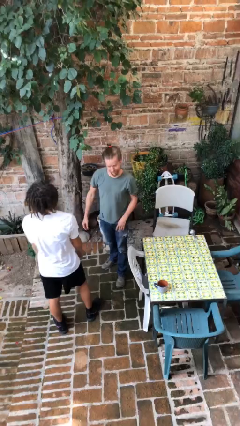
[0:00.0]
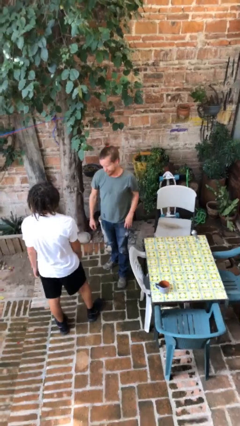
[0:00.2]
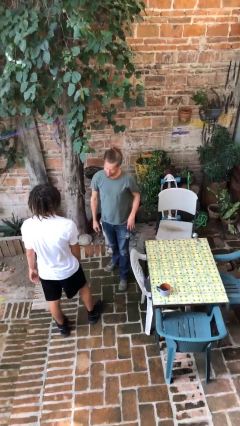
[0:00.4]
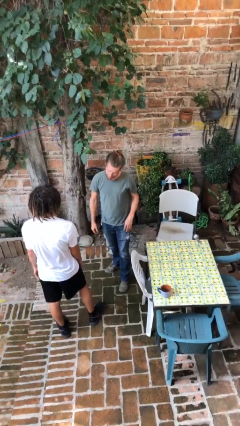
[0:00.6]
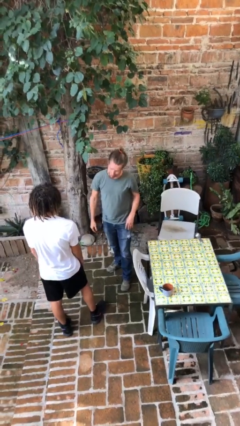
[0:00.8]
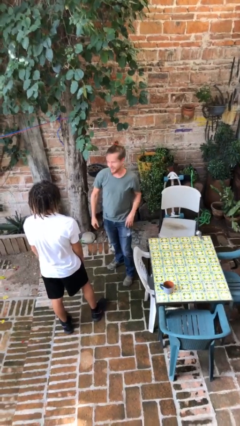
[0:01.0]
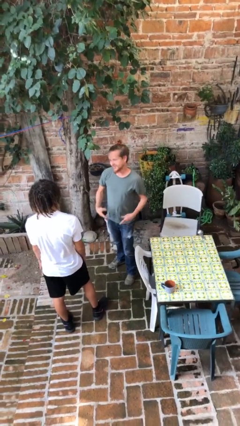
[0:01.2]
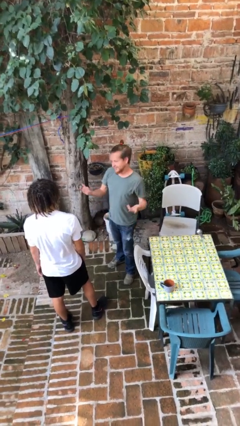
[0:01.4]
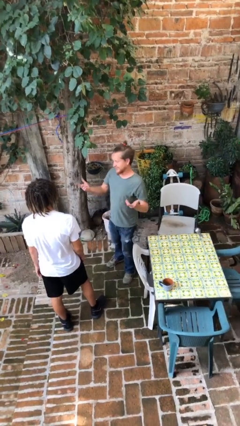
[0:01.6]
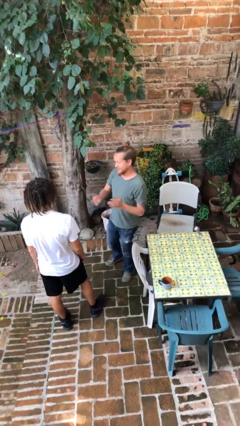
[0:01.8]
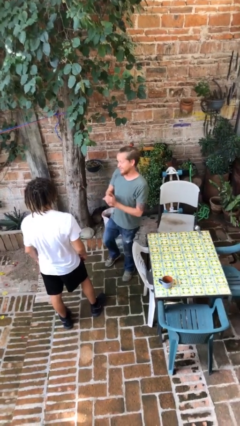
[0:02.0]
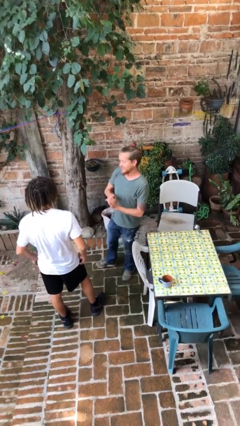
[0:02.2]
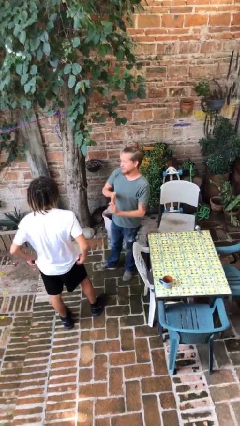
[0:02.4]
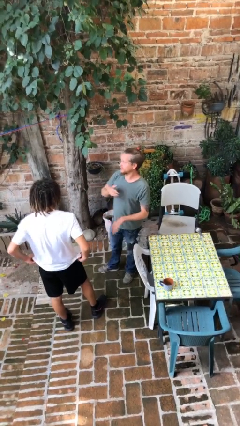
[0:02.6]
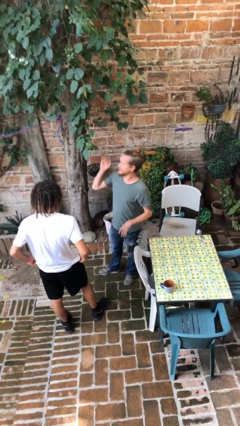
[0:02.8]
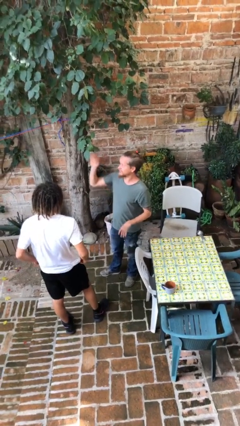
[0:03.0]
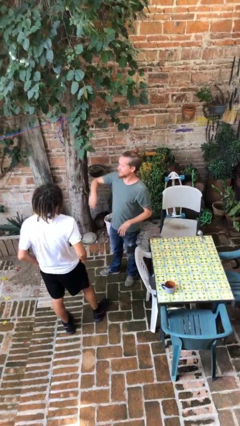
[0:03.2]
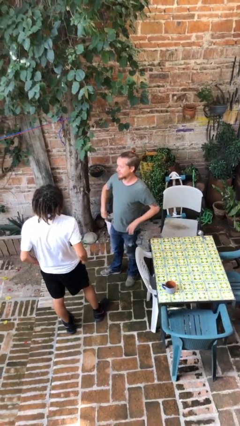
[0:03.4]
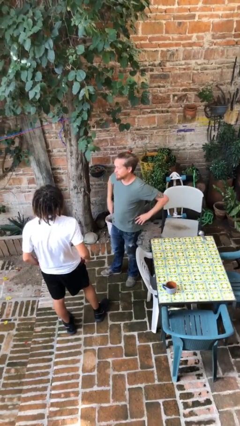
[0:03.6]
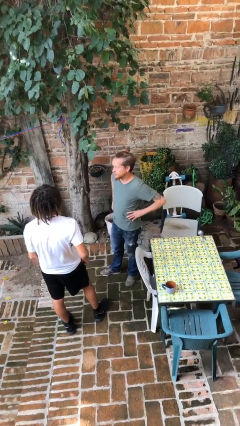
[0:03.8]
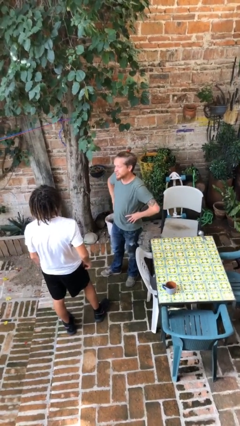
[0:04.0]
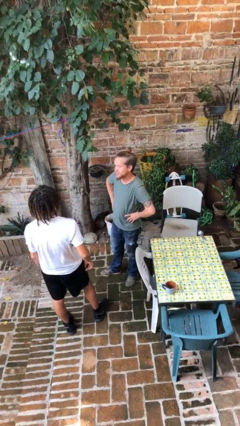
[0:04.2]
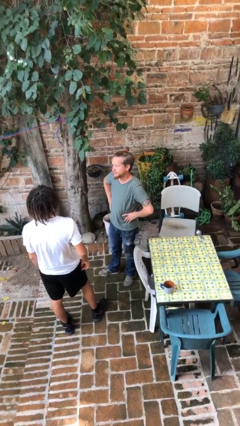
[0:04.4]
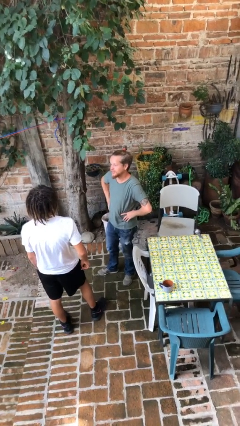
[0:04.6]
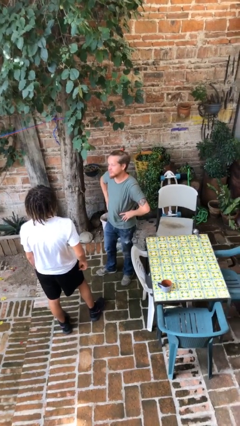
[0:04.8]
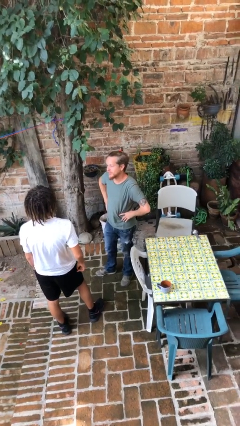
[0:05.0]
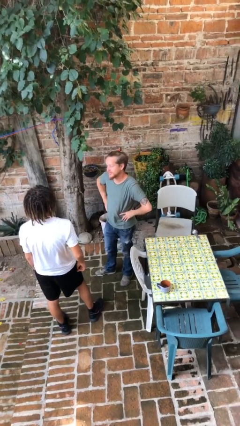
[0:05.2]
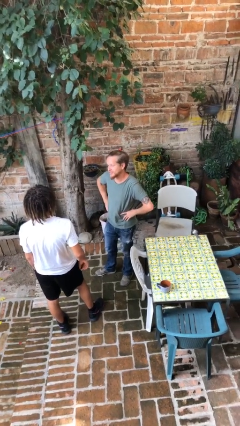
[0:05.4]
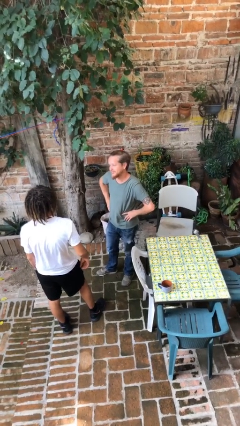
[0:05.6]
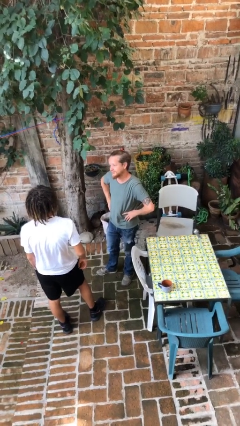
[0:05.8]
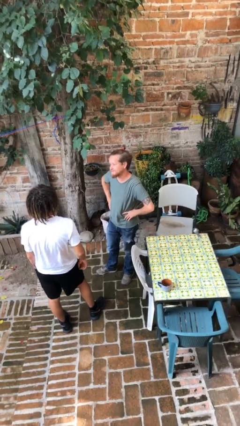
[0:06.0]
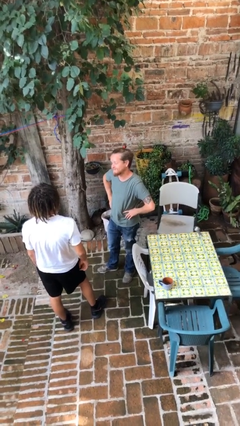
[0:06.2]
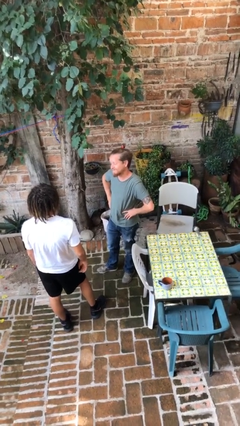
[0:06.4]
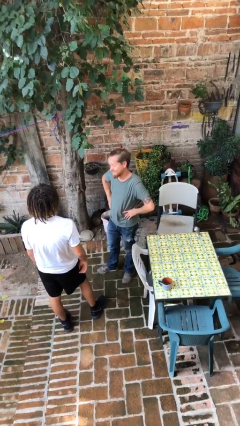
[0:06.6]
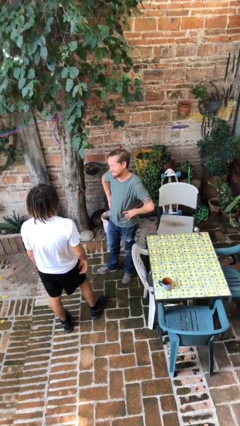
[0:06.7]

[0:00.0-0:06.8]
person talks to person

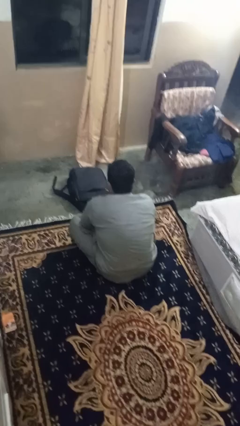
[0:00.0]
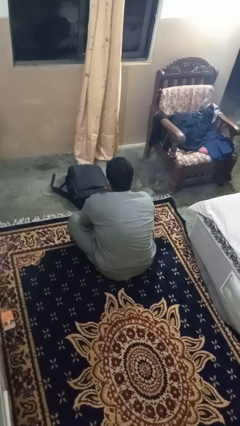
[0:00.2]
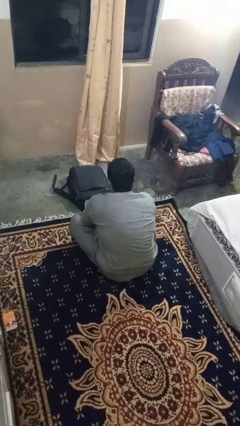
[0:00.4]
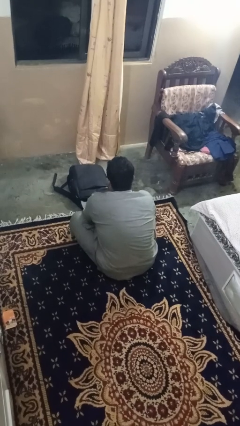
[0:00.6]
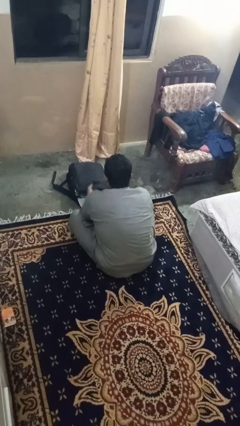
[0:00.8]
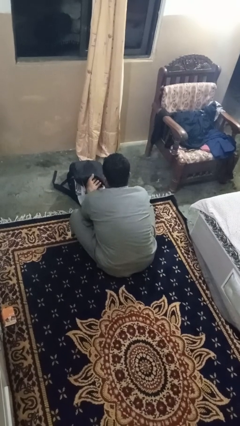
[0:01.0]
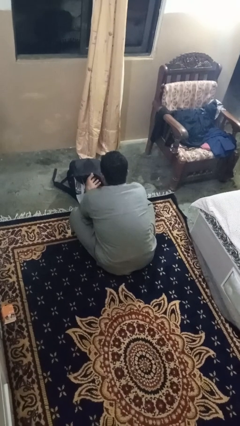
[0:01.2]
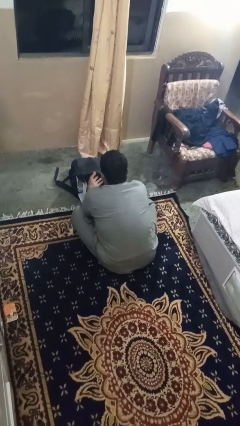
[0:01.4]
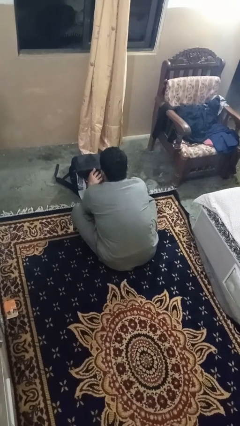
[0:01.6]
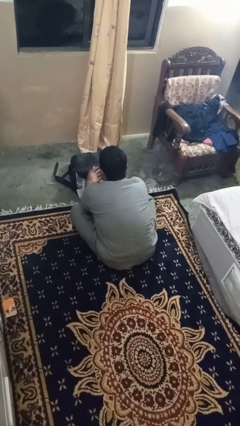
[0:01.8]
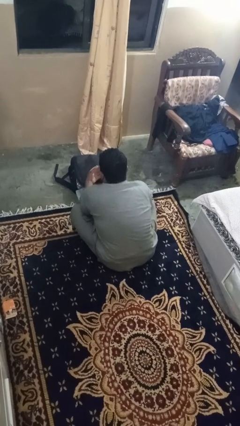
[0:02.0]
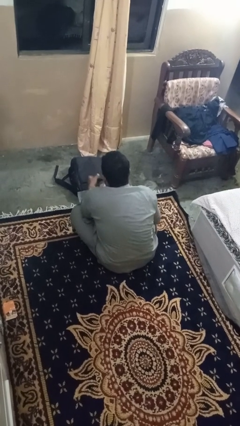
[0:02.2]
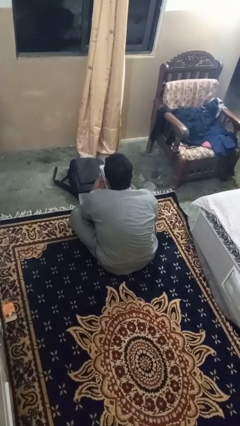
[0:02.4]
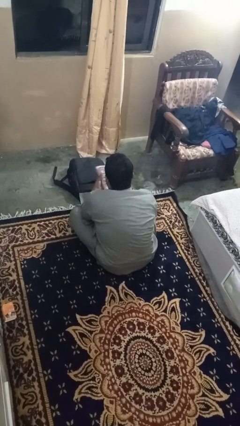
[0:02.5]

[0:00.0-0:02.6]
person takes object from bag

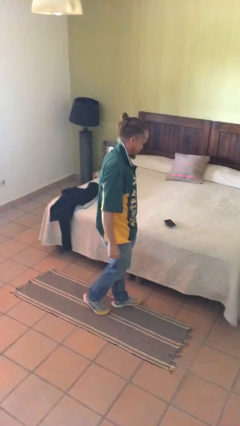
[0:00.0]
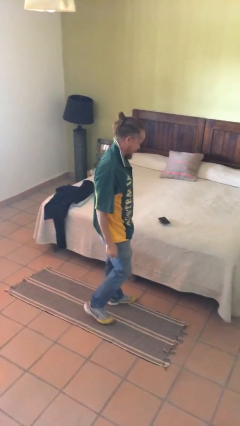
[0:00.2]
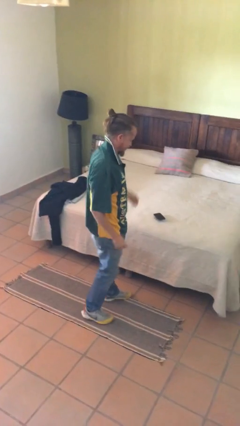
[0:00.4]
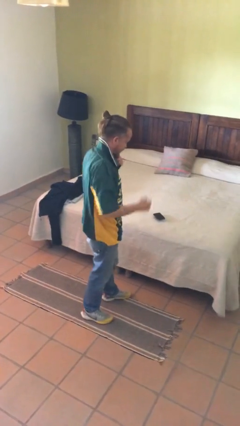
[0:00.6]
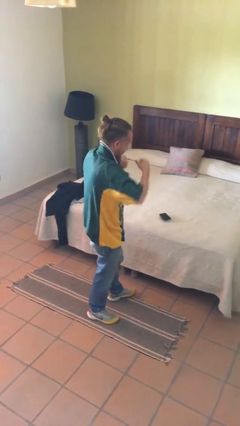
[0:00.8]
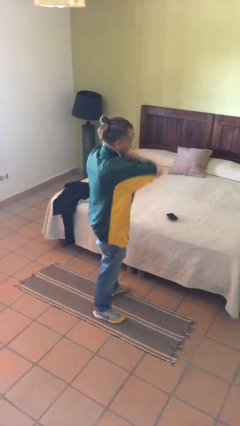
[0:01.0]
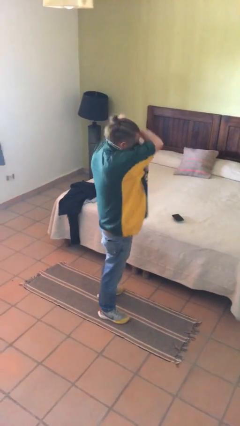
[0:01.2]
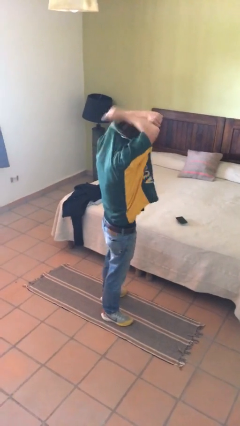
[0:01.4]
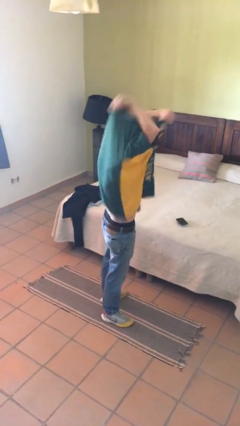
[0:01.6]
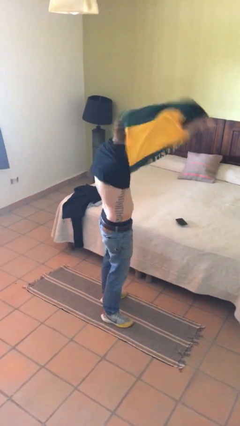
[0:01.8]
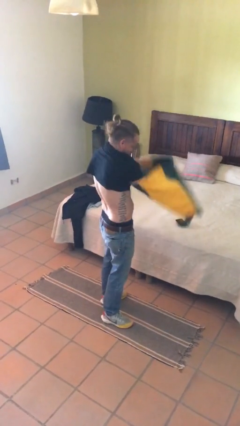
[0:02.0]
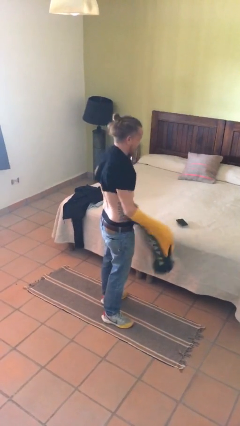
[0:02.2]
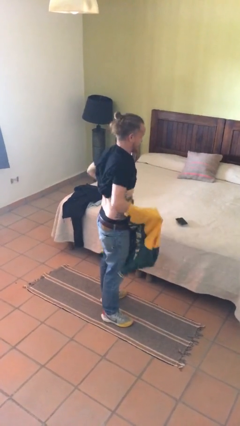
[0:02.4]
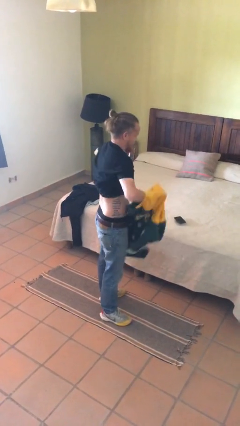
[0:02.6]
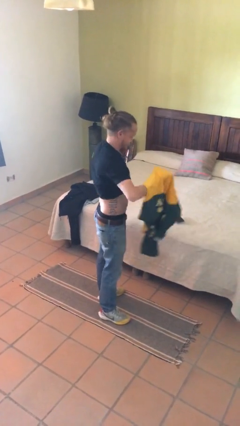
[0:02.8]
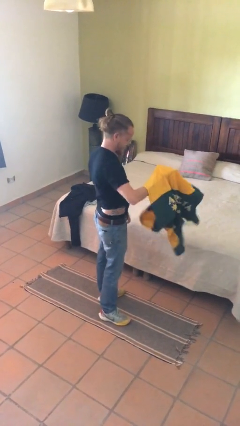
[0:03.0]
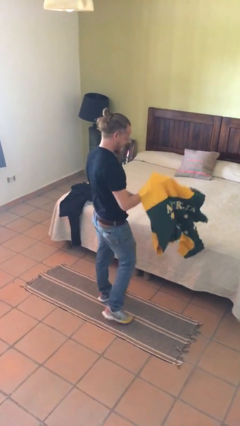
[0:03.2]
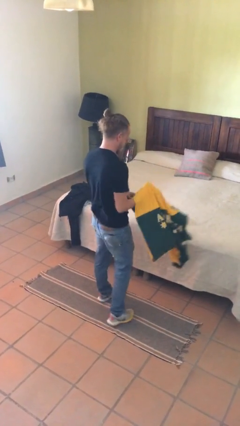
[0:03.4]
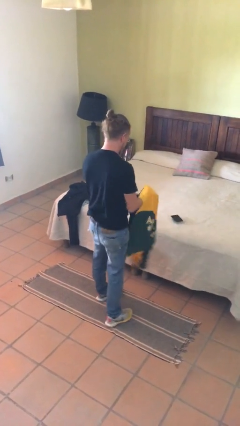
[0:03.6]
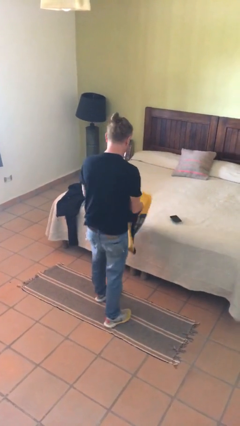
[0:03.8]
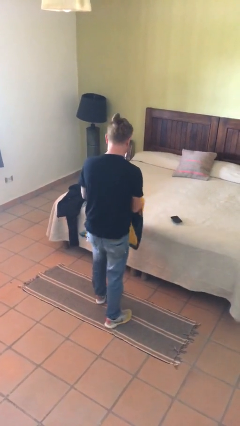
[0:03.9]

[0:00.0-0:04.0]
person takes off shirt

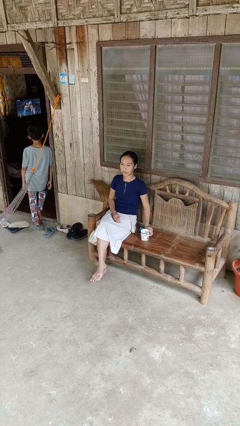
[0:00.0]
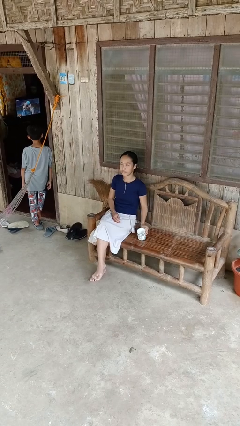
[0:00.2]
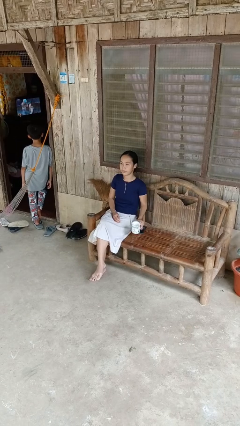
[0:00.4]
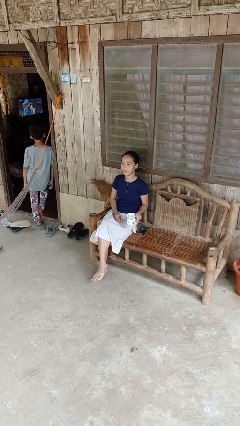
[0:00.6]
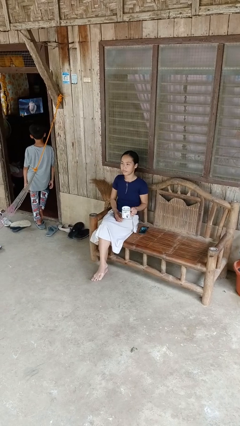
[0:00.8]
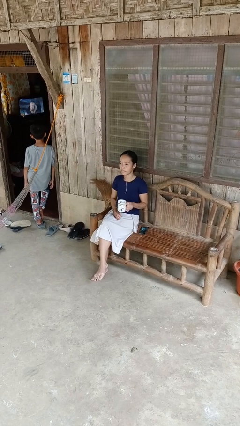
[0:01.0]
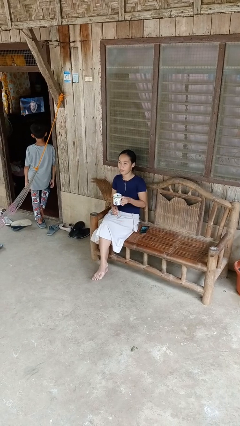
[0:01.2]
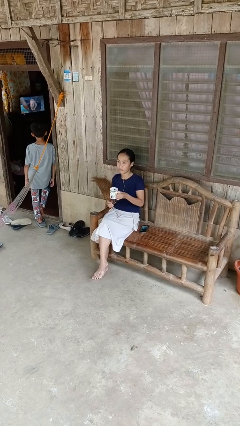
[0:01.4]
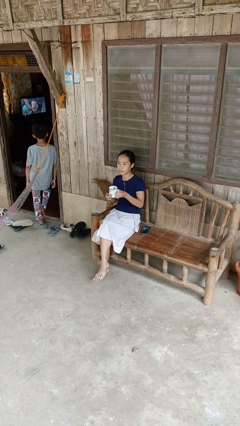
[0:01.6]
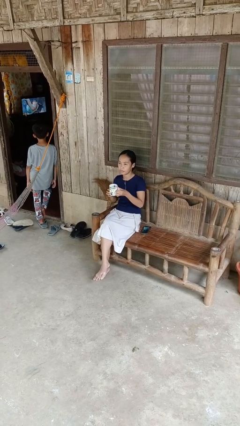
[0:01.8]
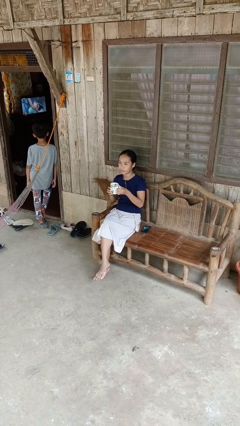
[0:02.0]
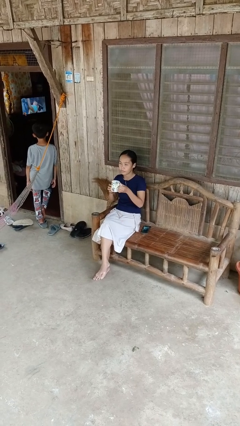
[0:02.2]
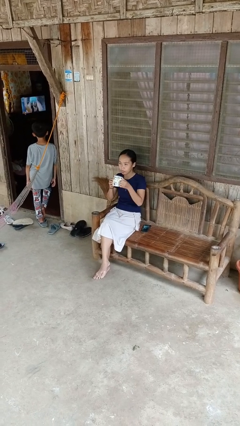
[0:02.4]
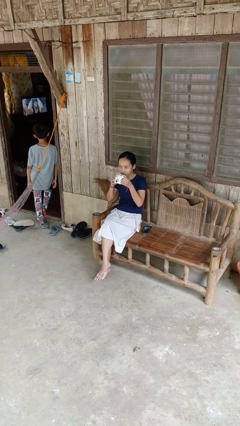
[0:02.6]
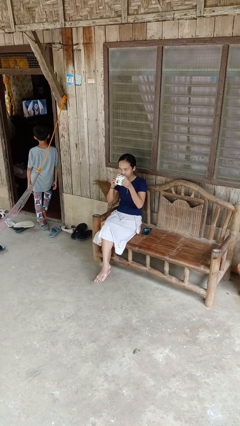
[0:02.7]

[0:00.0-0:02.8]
person picks up object from table

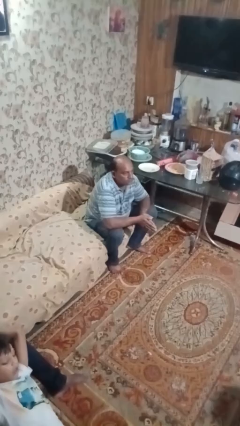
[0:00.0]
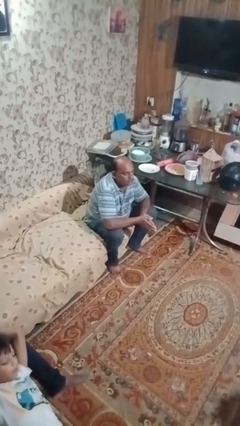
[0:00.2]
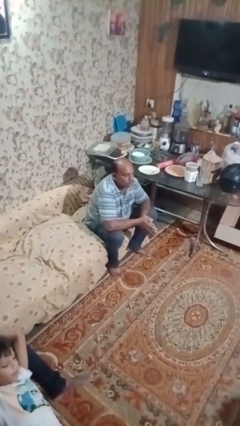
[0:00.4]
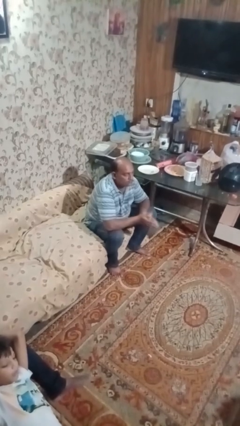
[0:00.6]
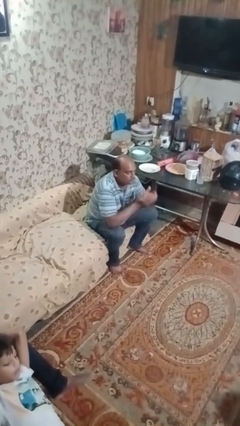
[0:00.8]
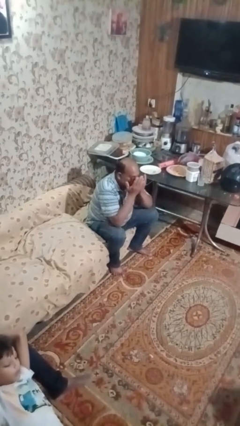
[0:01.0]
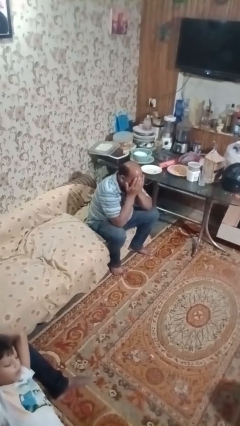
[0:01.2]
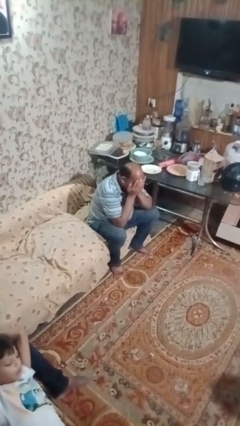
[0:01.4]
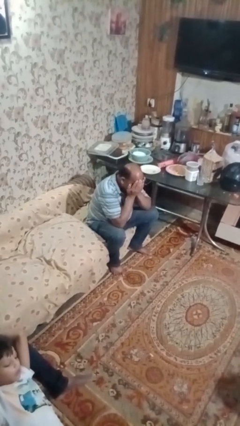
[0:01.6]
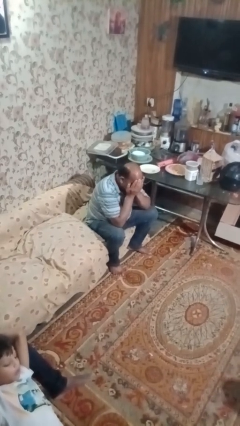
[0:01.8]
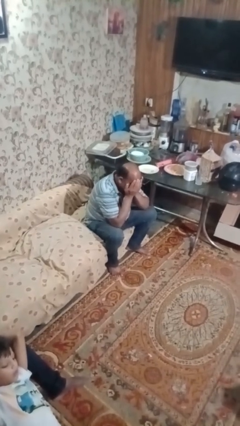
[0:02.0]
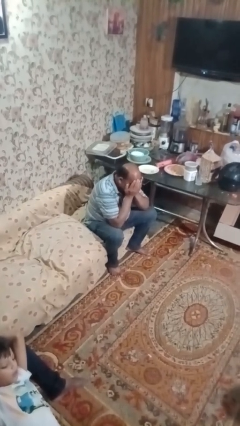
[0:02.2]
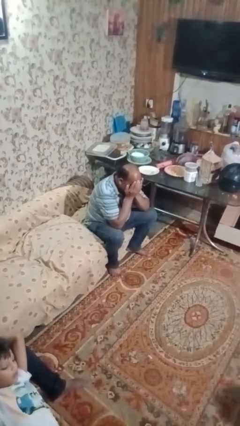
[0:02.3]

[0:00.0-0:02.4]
person covers face with hands
